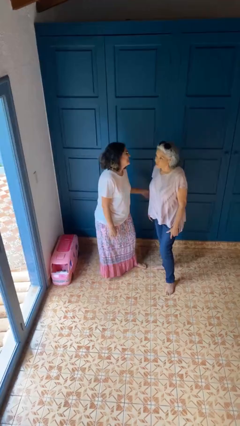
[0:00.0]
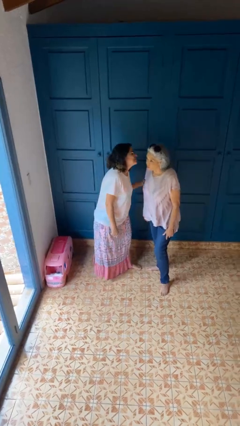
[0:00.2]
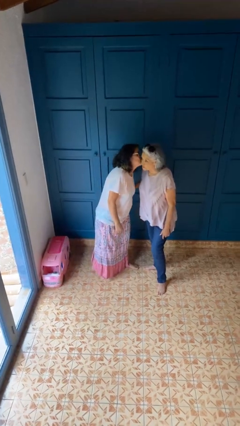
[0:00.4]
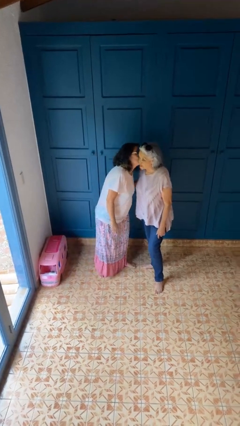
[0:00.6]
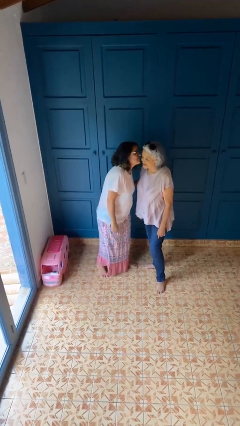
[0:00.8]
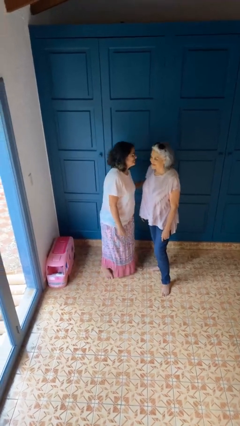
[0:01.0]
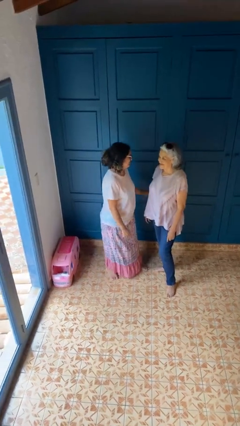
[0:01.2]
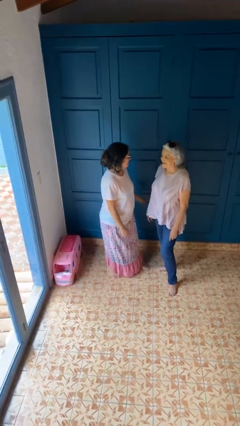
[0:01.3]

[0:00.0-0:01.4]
person kisses cheek of person

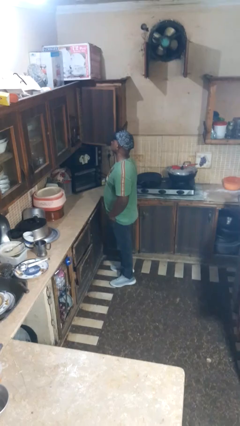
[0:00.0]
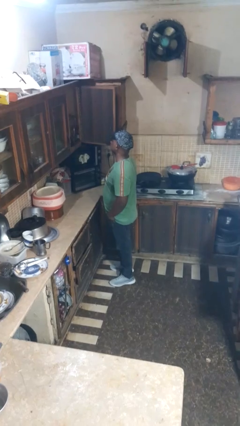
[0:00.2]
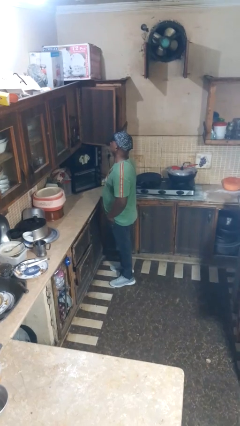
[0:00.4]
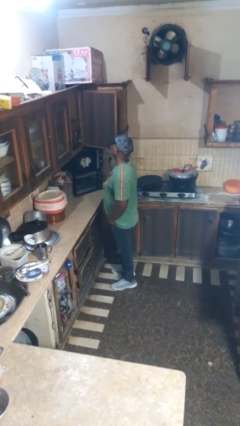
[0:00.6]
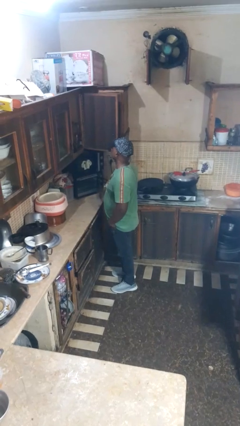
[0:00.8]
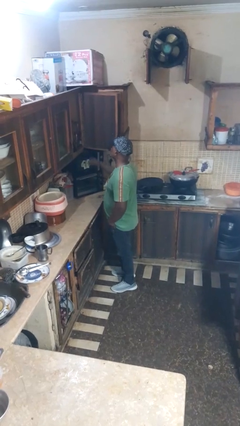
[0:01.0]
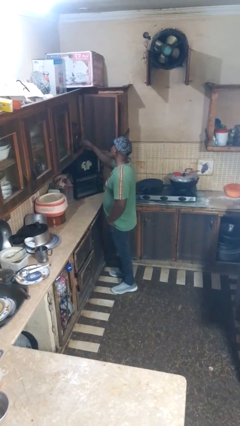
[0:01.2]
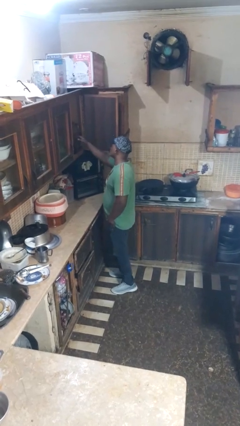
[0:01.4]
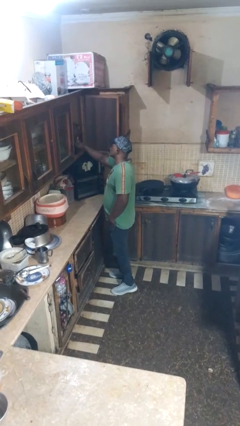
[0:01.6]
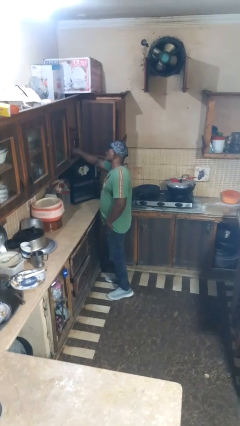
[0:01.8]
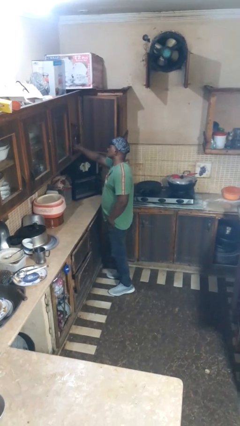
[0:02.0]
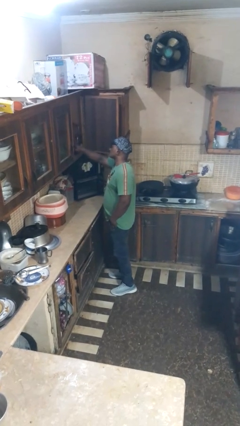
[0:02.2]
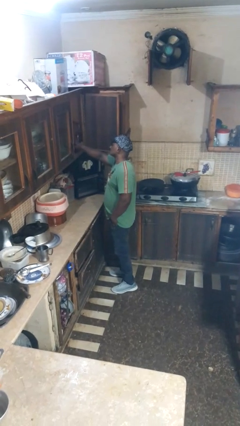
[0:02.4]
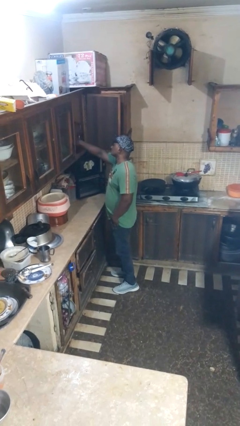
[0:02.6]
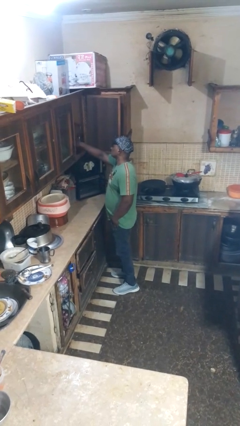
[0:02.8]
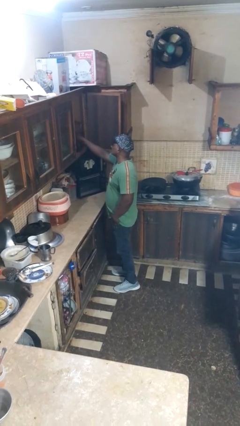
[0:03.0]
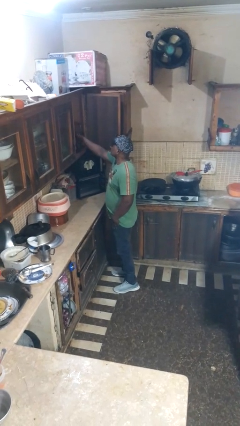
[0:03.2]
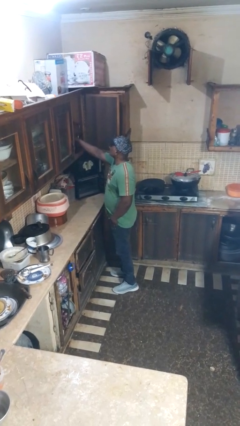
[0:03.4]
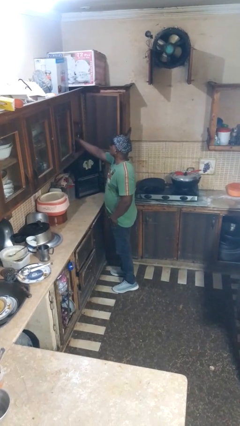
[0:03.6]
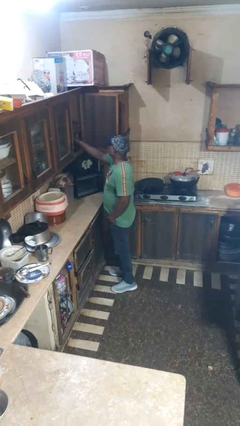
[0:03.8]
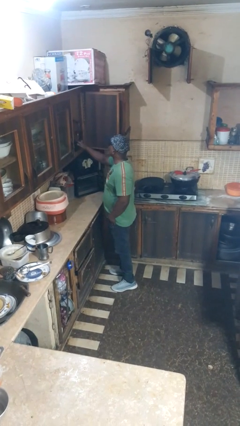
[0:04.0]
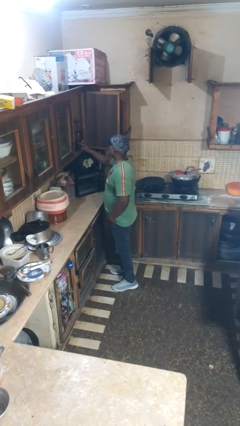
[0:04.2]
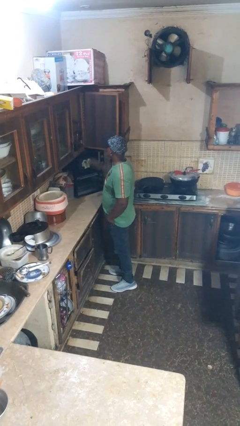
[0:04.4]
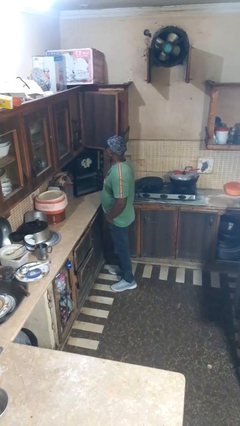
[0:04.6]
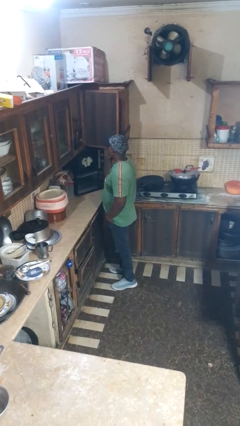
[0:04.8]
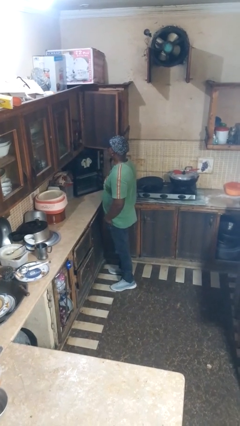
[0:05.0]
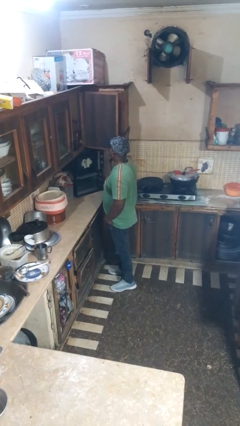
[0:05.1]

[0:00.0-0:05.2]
person searches in cabinet

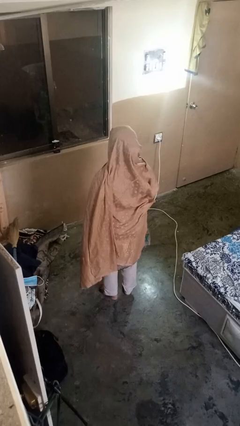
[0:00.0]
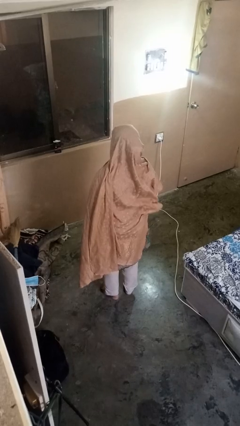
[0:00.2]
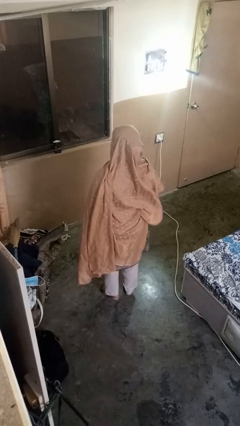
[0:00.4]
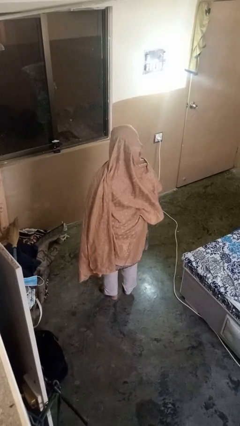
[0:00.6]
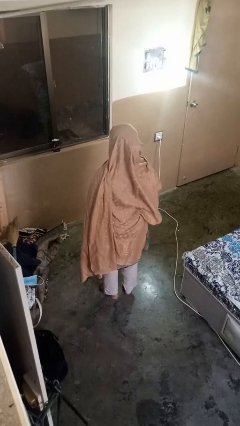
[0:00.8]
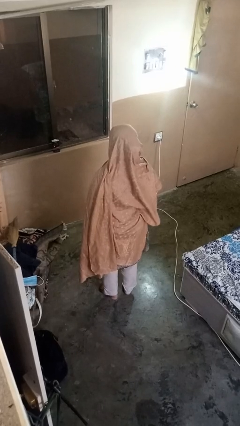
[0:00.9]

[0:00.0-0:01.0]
person punches

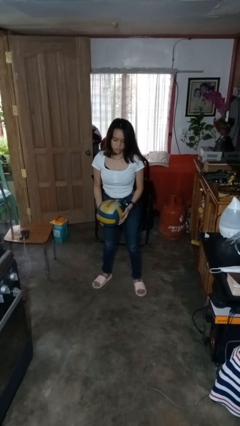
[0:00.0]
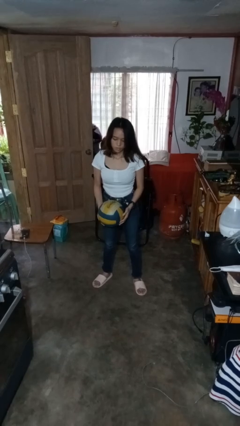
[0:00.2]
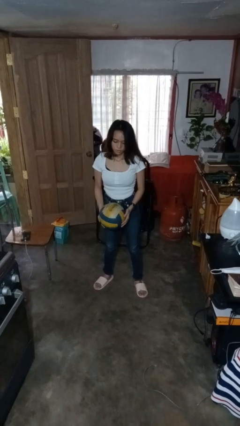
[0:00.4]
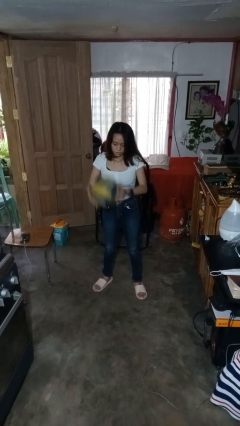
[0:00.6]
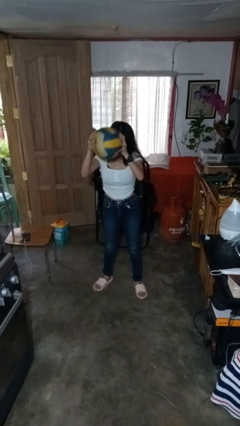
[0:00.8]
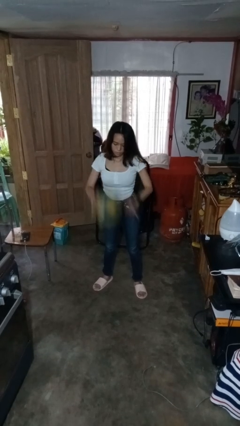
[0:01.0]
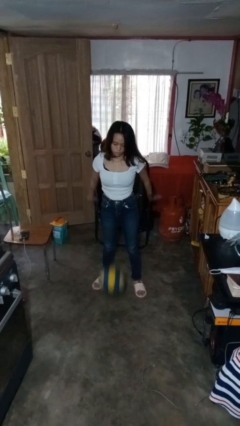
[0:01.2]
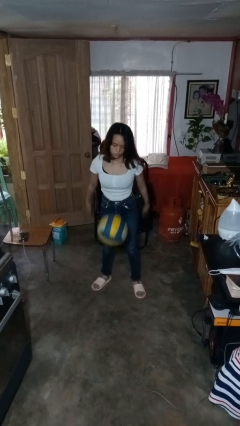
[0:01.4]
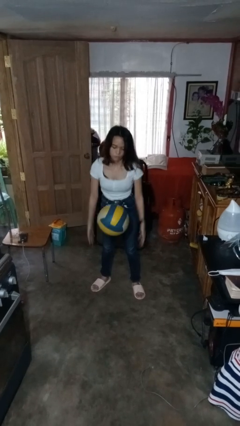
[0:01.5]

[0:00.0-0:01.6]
person bounces ball on floor

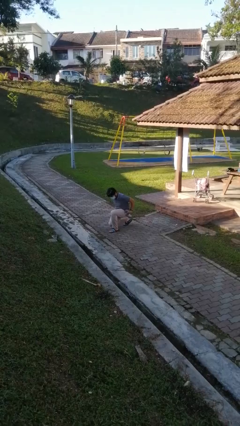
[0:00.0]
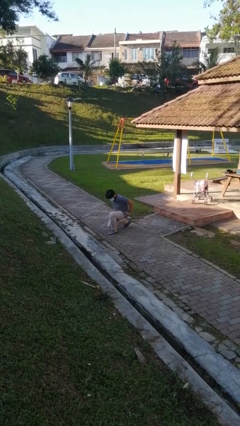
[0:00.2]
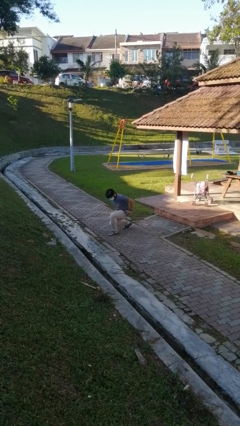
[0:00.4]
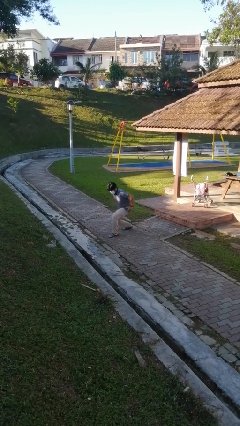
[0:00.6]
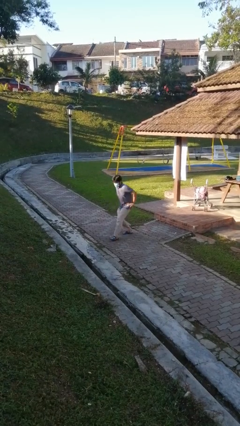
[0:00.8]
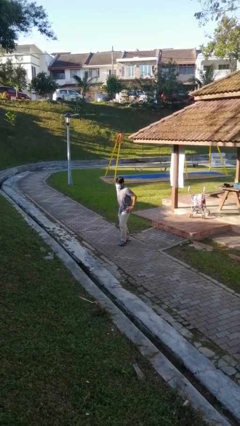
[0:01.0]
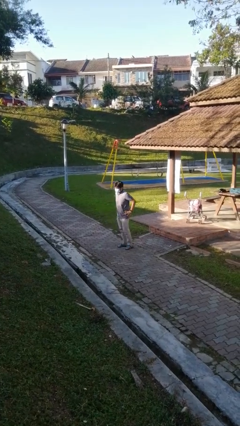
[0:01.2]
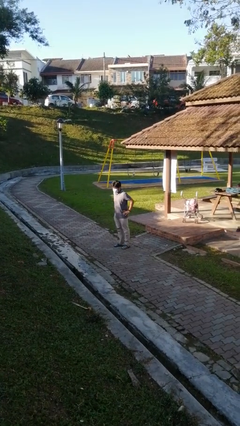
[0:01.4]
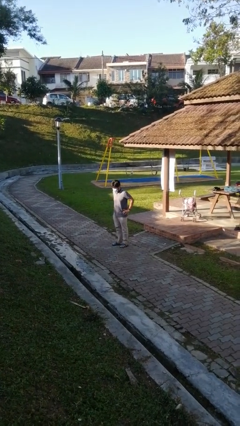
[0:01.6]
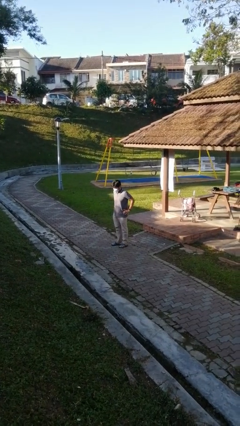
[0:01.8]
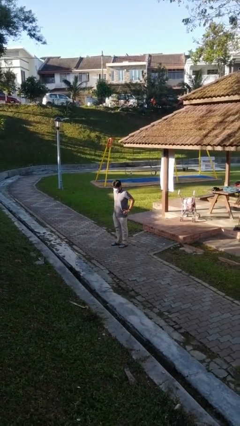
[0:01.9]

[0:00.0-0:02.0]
person stands up from floor

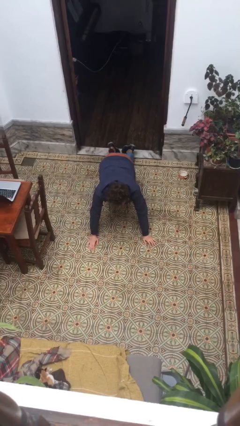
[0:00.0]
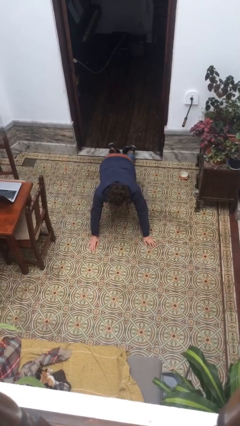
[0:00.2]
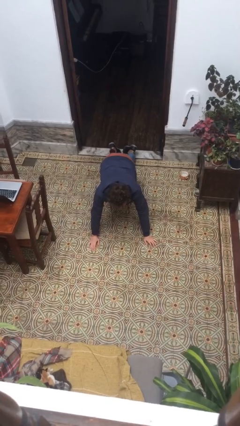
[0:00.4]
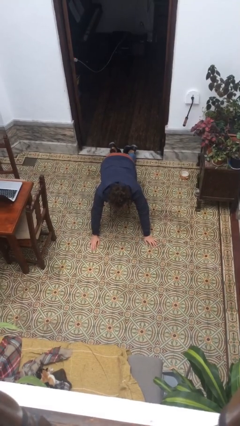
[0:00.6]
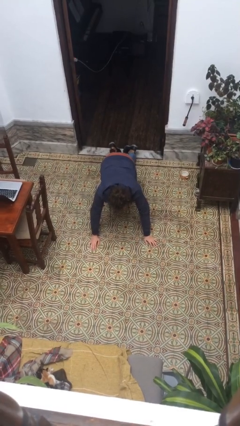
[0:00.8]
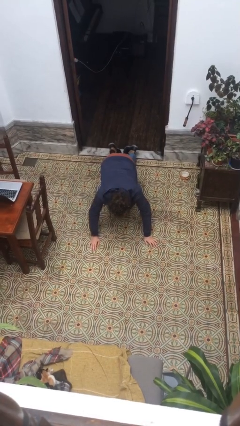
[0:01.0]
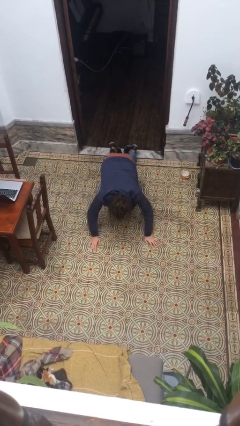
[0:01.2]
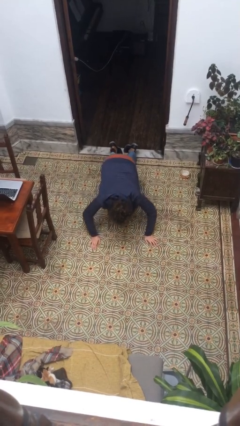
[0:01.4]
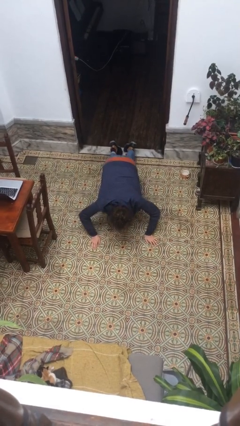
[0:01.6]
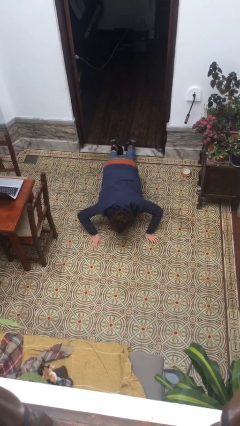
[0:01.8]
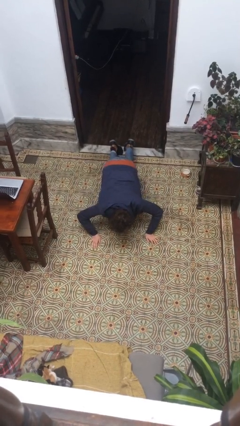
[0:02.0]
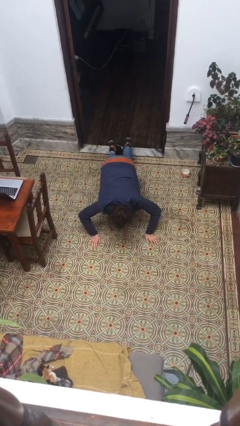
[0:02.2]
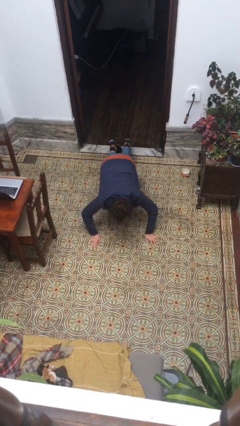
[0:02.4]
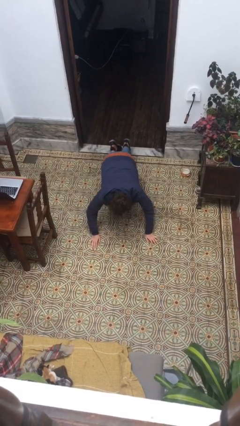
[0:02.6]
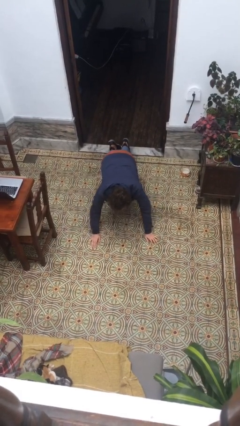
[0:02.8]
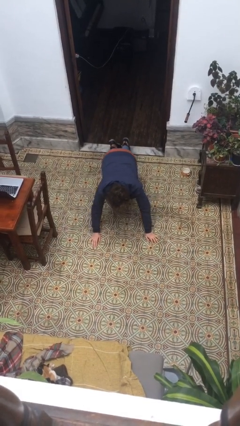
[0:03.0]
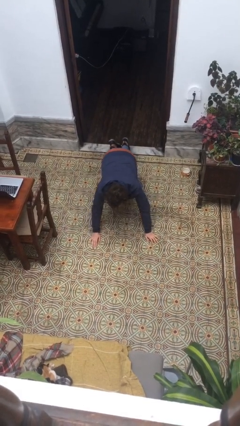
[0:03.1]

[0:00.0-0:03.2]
person exercises with pushup

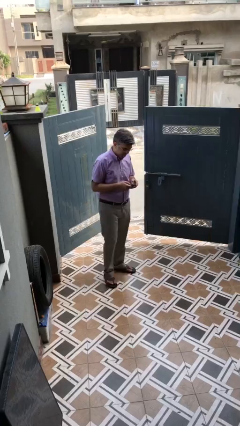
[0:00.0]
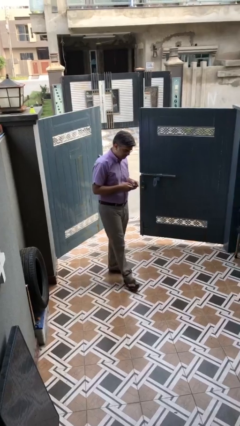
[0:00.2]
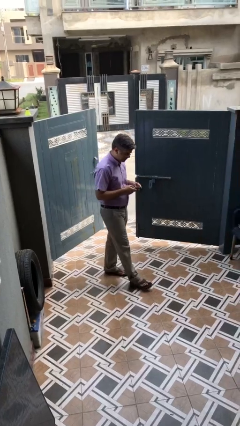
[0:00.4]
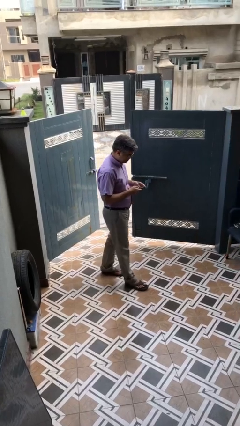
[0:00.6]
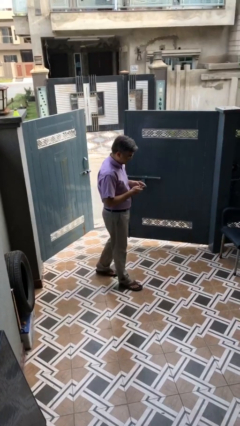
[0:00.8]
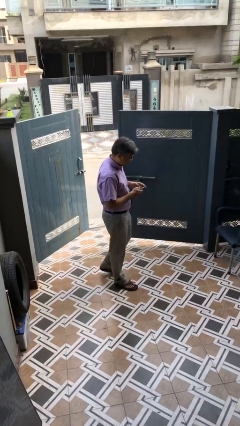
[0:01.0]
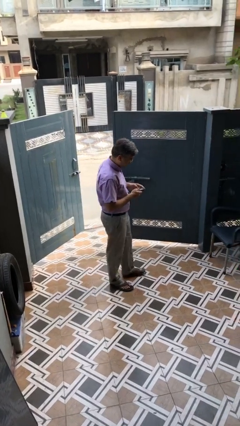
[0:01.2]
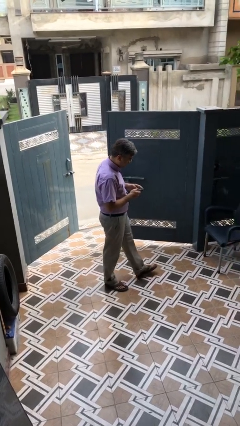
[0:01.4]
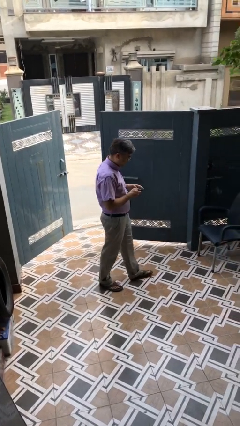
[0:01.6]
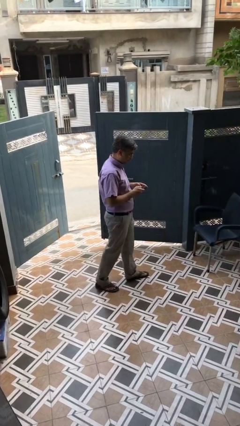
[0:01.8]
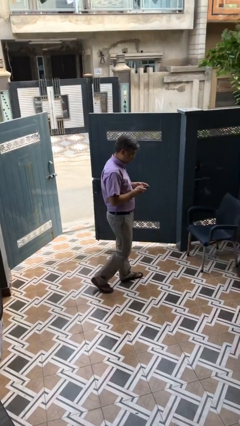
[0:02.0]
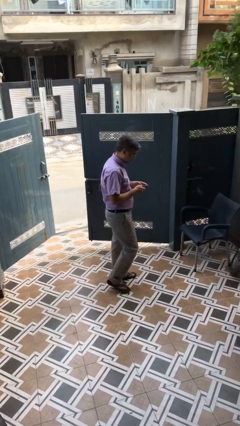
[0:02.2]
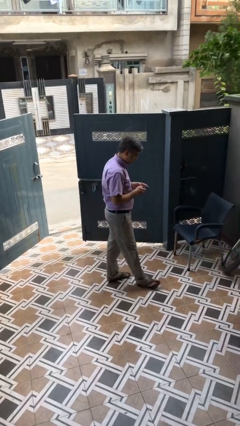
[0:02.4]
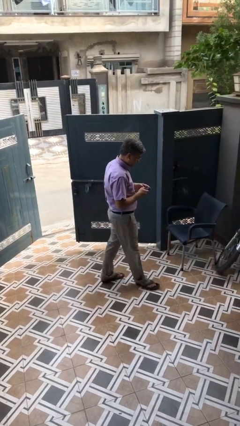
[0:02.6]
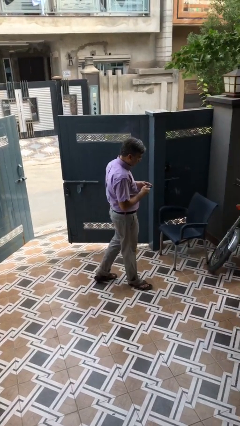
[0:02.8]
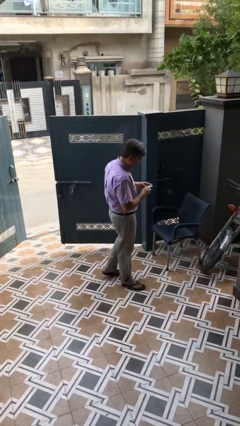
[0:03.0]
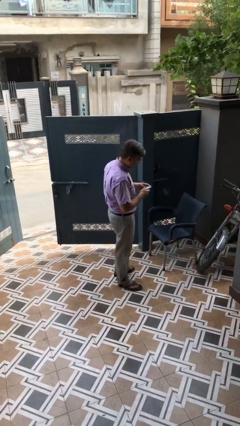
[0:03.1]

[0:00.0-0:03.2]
person texts on phone
